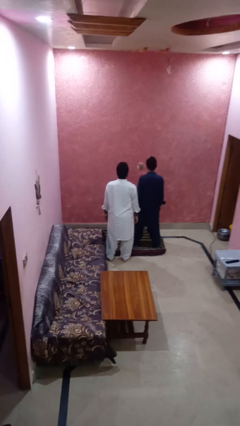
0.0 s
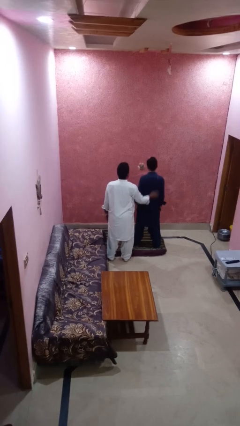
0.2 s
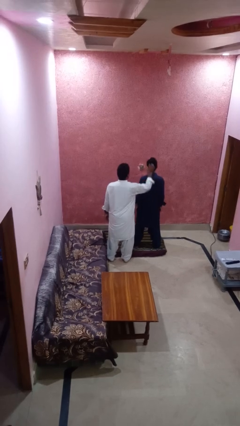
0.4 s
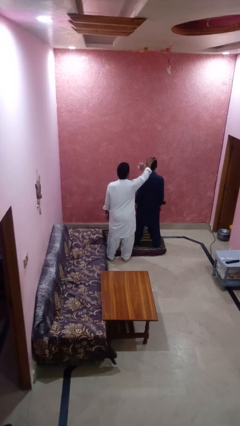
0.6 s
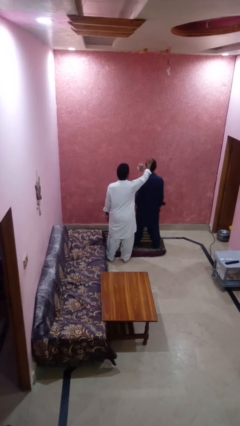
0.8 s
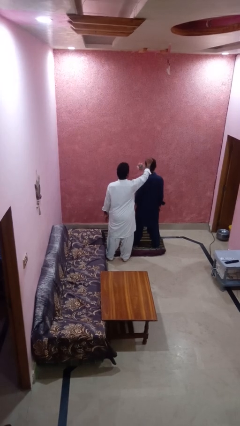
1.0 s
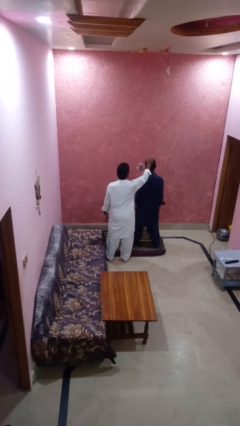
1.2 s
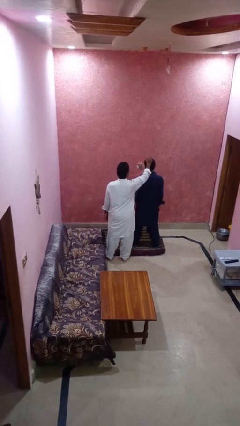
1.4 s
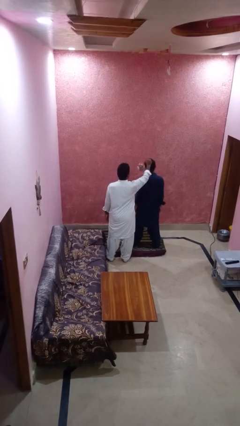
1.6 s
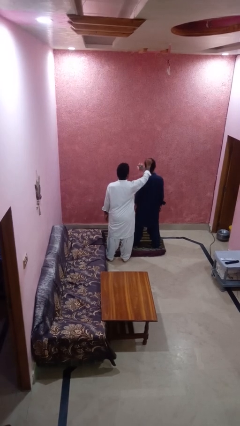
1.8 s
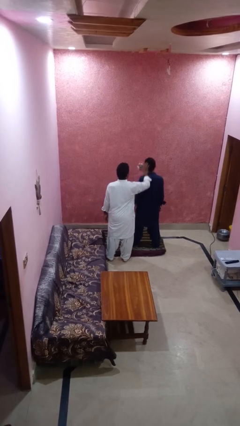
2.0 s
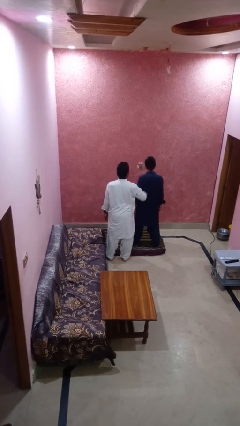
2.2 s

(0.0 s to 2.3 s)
person grabs person by hair

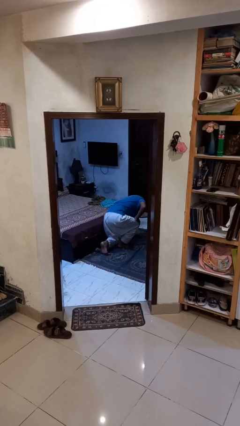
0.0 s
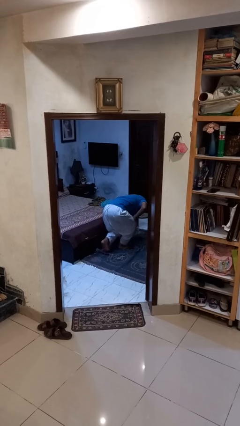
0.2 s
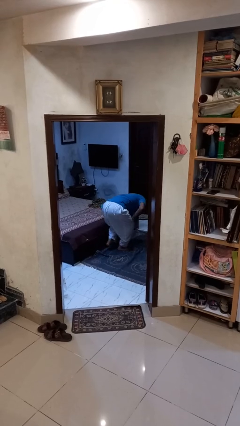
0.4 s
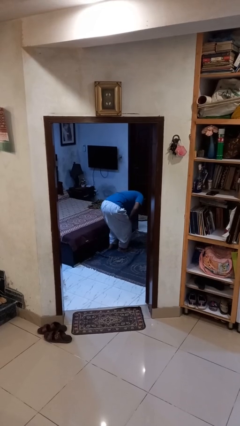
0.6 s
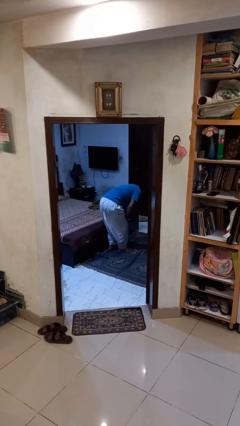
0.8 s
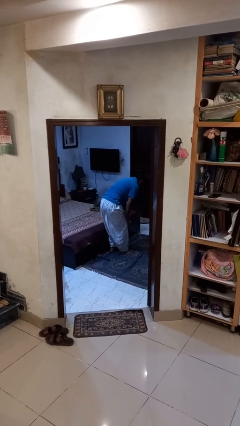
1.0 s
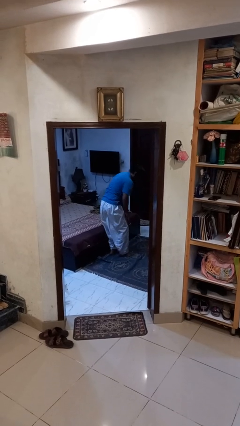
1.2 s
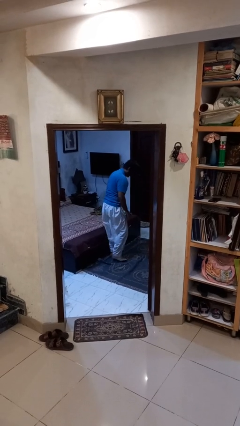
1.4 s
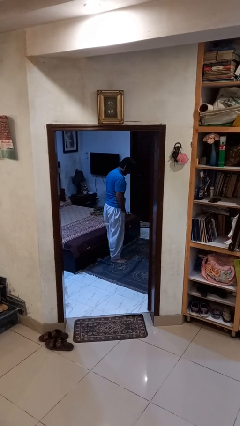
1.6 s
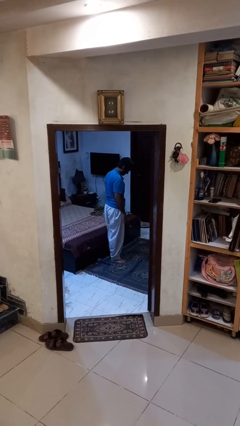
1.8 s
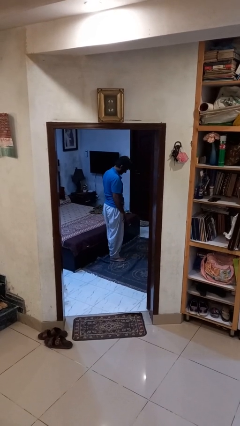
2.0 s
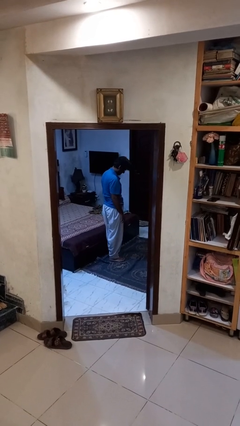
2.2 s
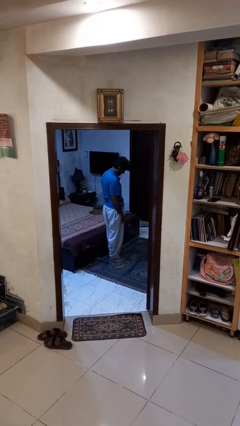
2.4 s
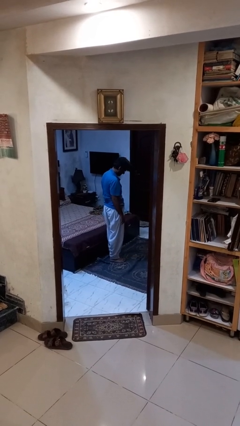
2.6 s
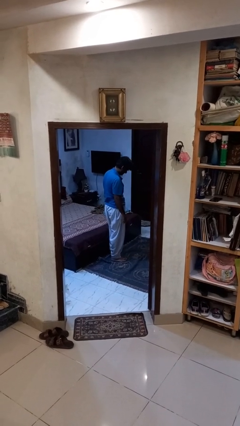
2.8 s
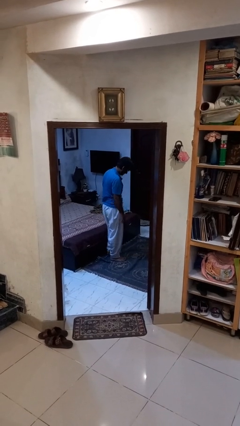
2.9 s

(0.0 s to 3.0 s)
person stands up from floor

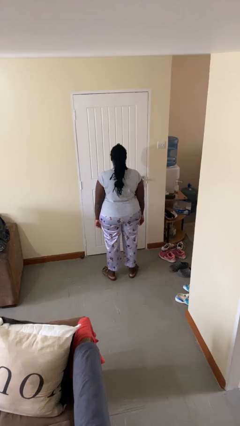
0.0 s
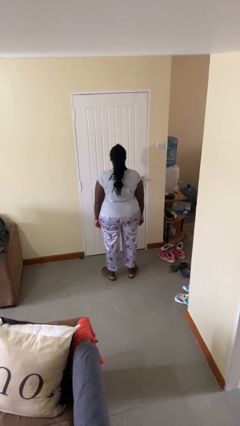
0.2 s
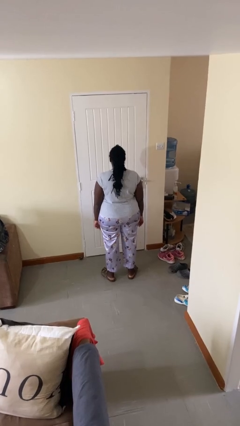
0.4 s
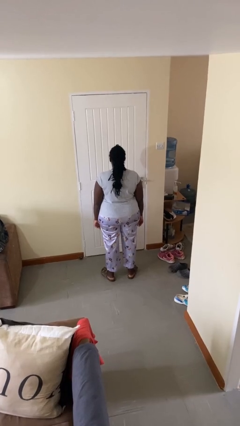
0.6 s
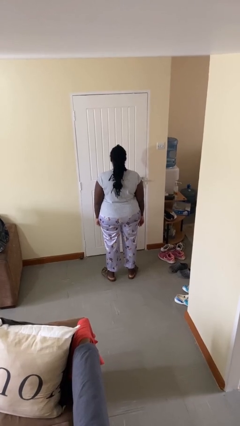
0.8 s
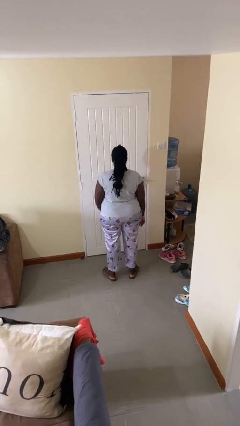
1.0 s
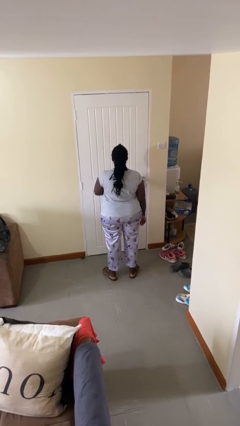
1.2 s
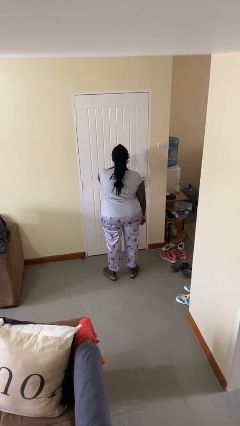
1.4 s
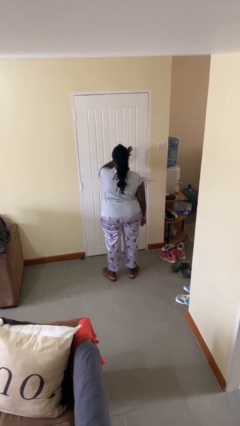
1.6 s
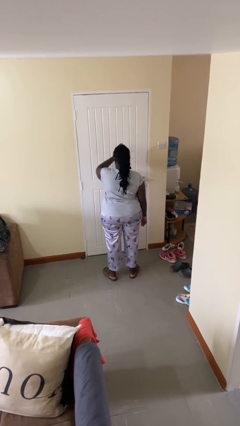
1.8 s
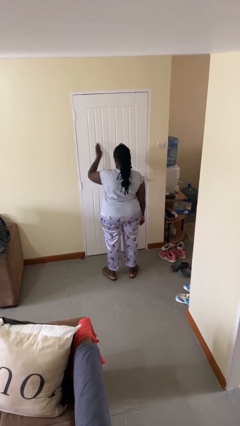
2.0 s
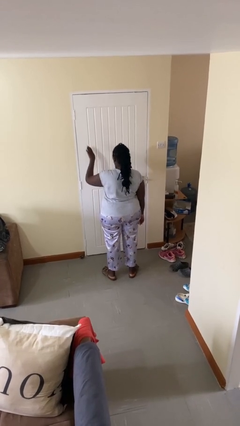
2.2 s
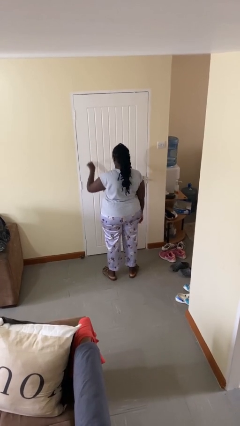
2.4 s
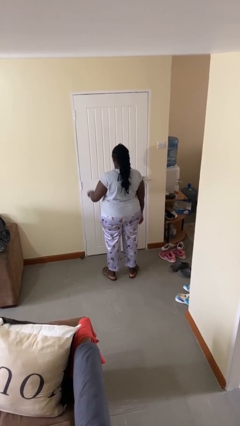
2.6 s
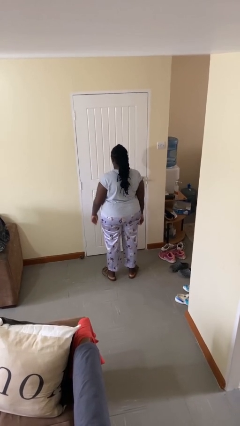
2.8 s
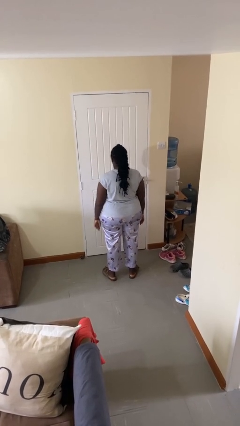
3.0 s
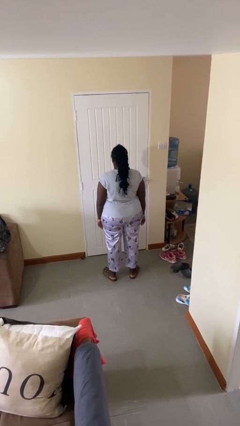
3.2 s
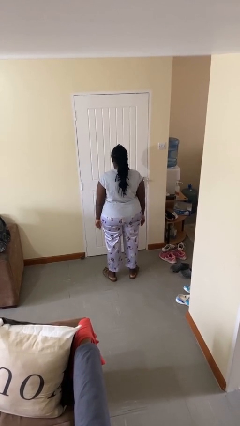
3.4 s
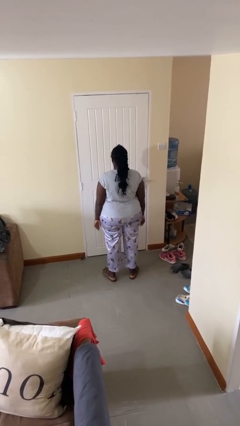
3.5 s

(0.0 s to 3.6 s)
person gestures swipe left

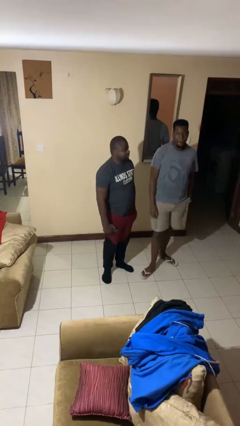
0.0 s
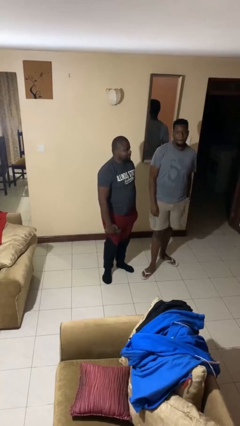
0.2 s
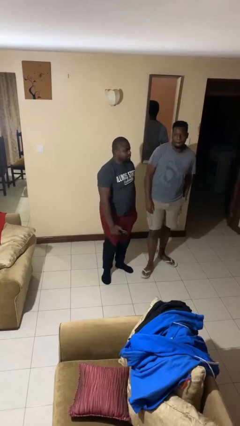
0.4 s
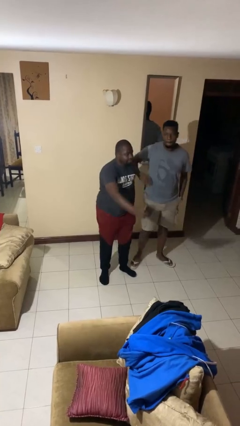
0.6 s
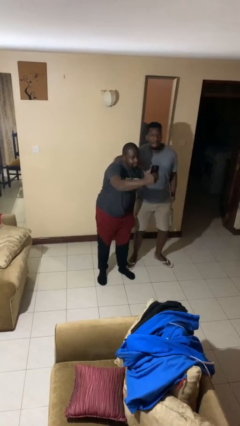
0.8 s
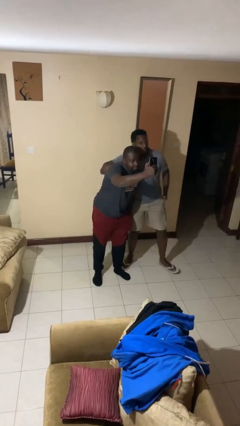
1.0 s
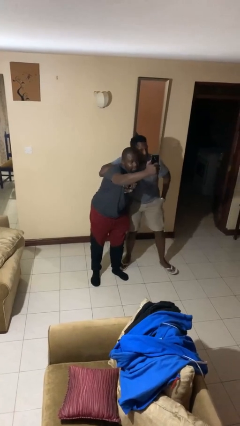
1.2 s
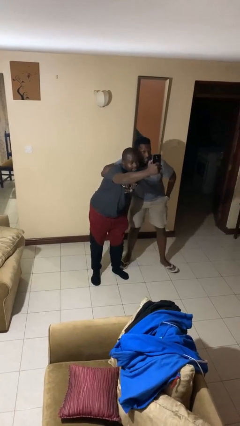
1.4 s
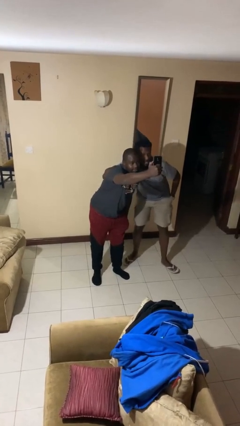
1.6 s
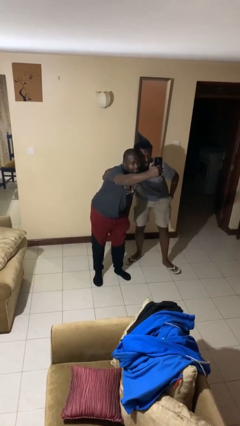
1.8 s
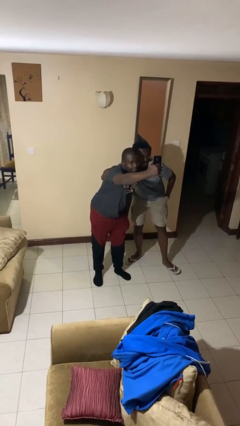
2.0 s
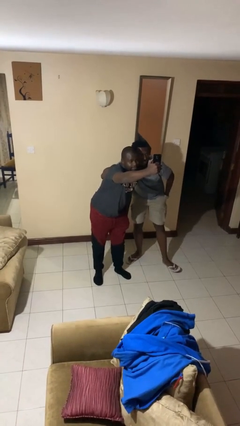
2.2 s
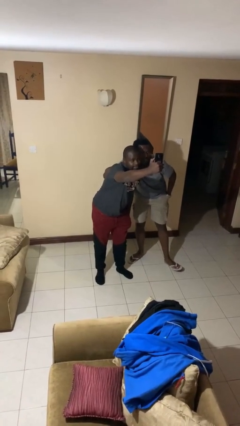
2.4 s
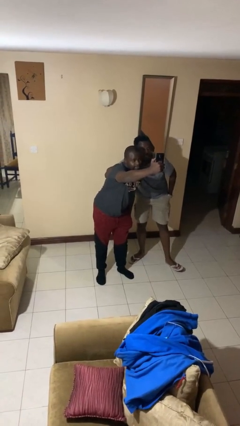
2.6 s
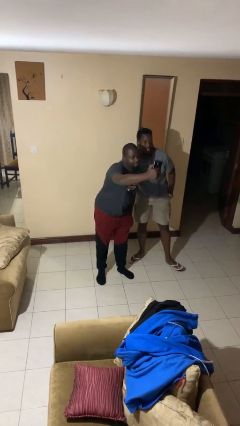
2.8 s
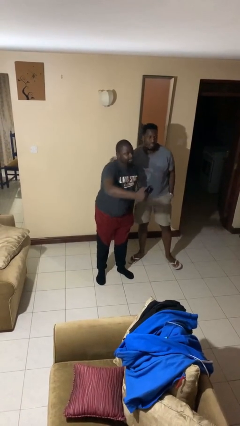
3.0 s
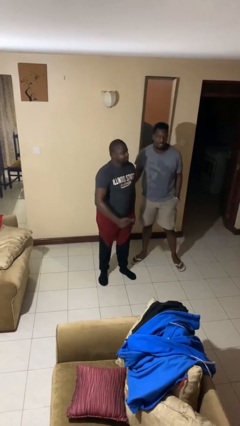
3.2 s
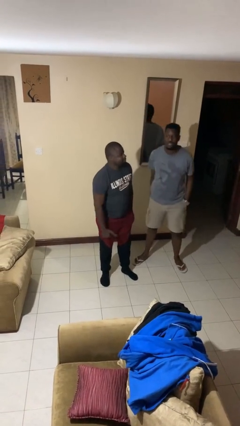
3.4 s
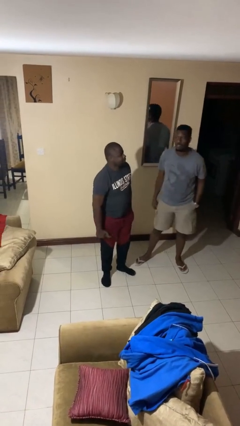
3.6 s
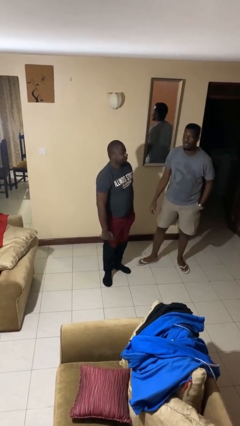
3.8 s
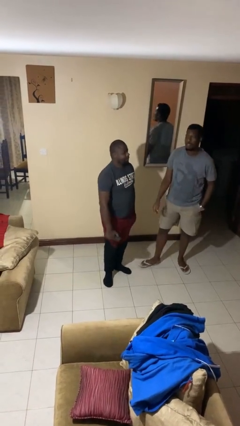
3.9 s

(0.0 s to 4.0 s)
person takes selfie with person

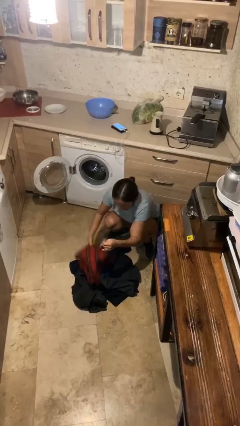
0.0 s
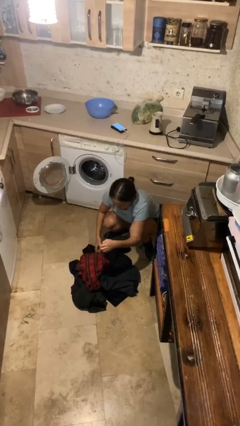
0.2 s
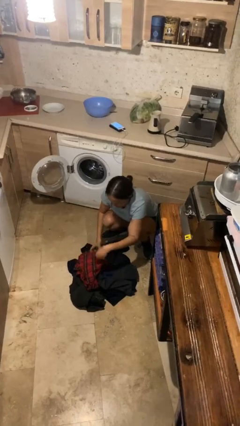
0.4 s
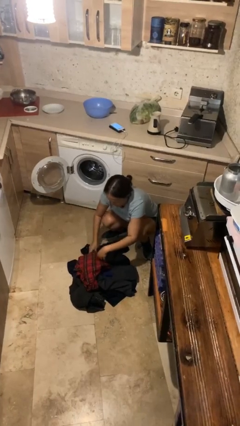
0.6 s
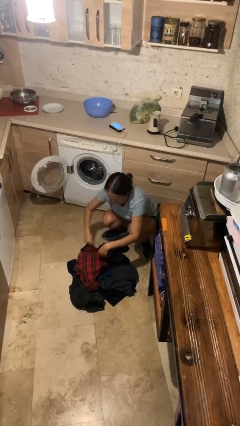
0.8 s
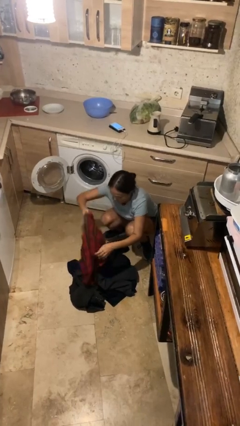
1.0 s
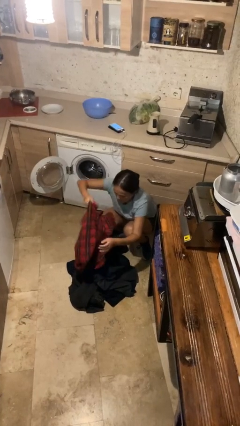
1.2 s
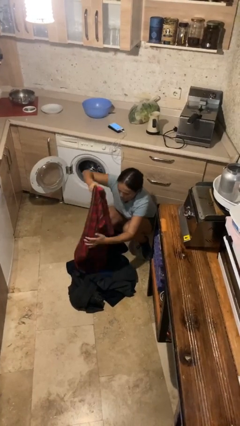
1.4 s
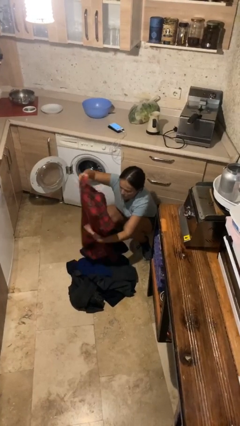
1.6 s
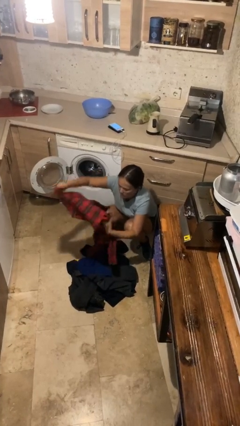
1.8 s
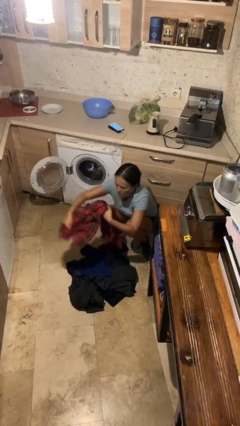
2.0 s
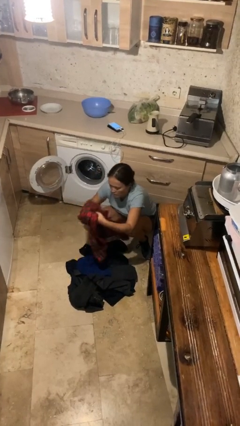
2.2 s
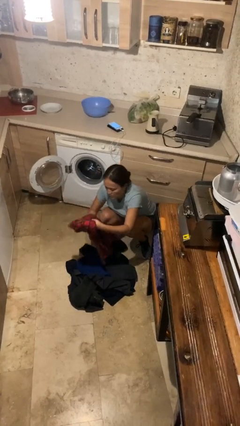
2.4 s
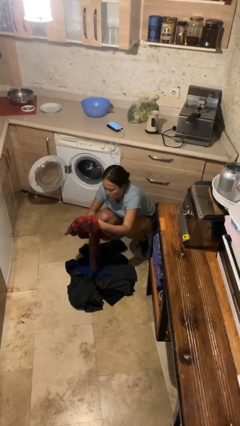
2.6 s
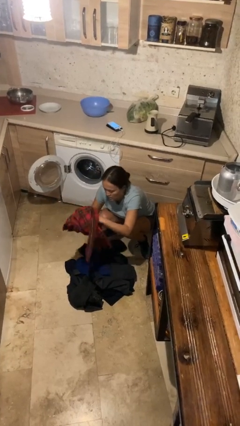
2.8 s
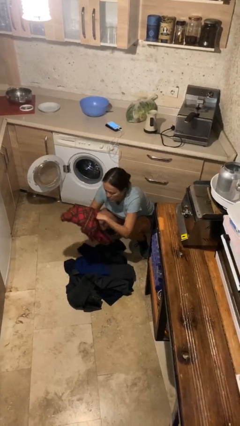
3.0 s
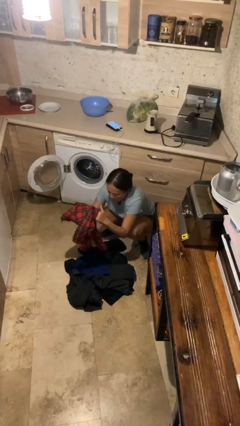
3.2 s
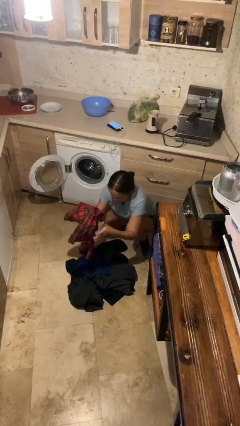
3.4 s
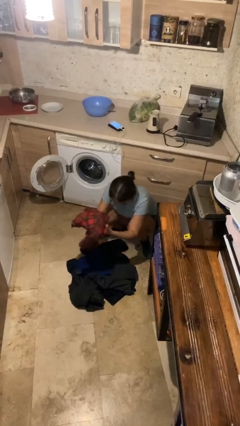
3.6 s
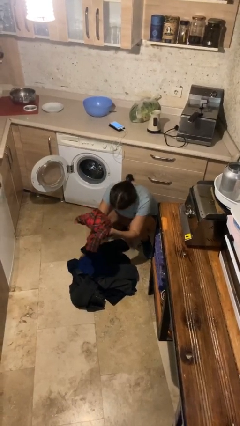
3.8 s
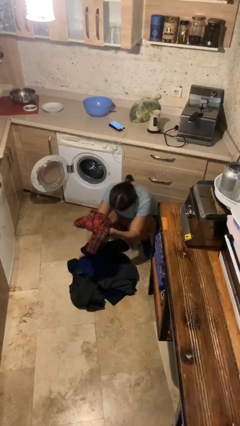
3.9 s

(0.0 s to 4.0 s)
person folds shirt

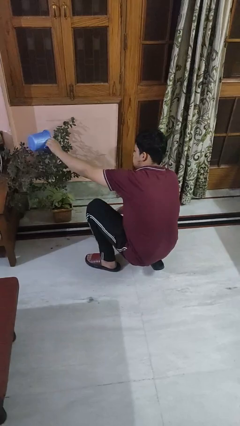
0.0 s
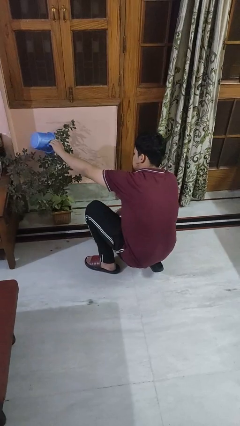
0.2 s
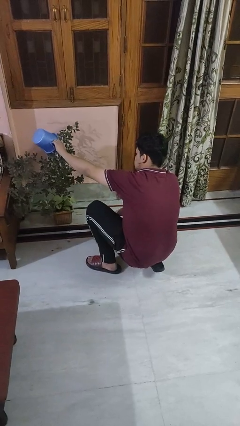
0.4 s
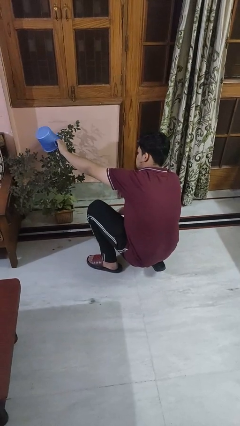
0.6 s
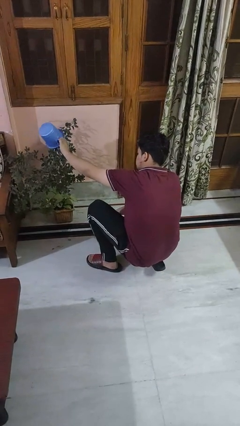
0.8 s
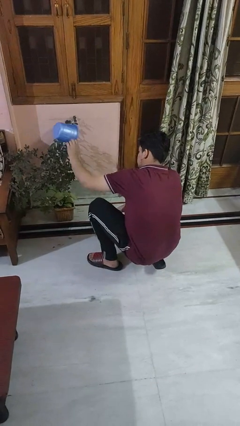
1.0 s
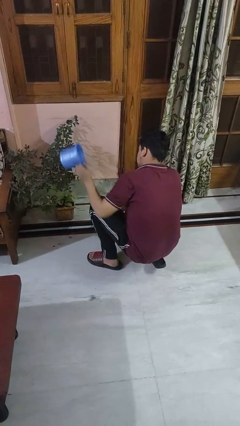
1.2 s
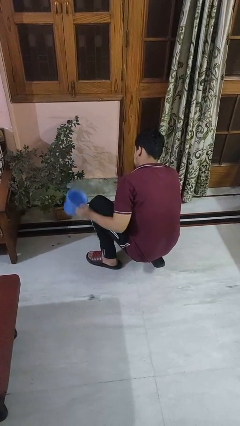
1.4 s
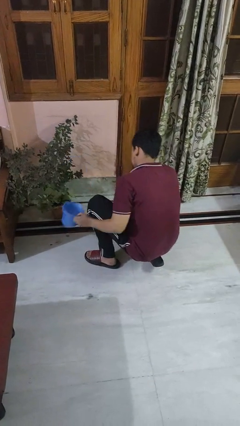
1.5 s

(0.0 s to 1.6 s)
person waters houseplant
